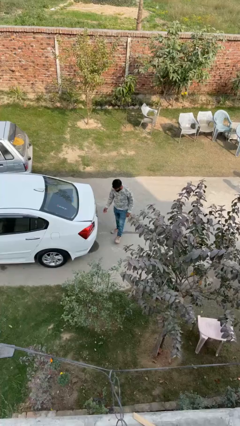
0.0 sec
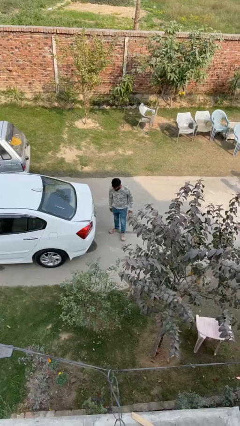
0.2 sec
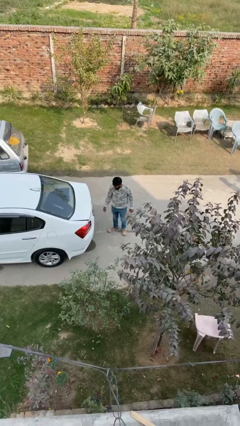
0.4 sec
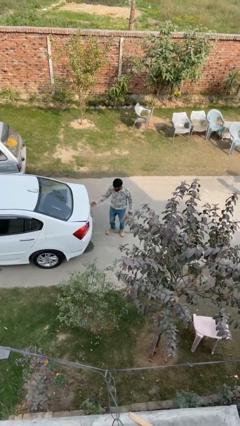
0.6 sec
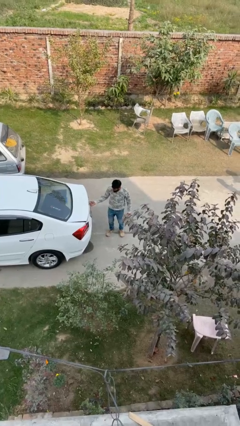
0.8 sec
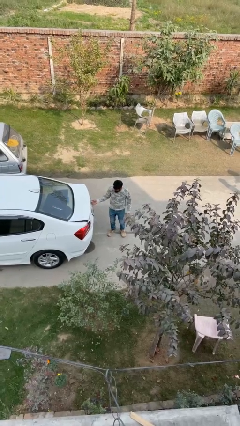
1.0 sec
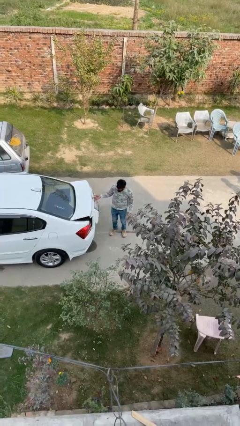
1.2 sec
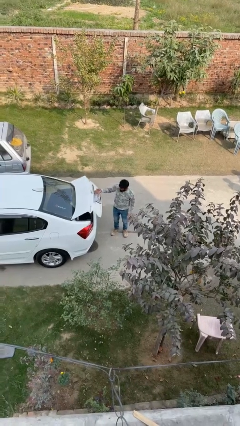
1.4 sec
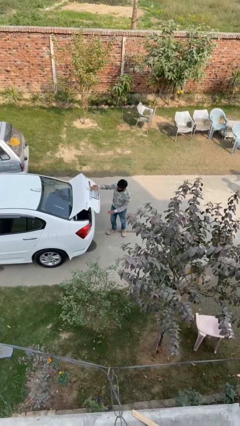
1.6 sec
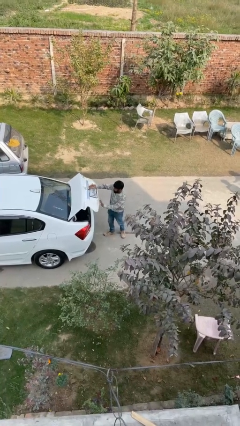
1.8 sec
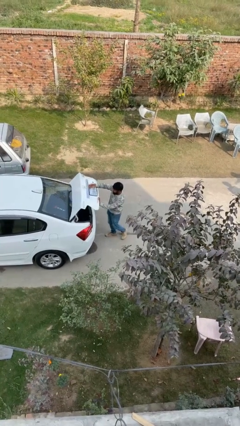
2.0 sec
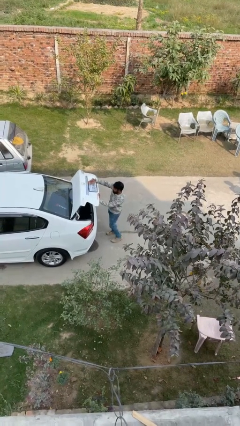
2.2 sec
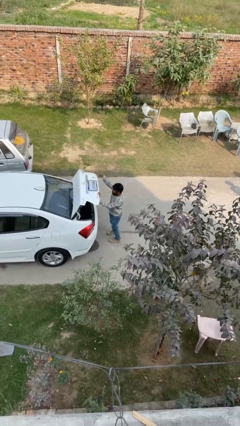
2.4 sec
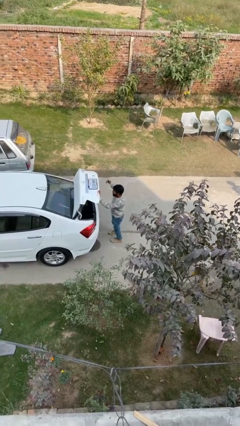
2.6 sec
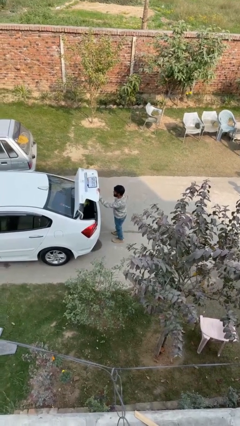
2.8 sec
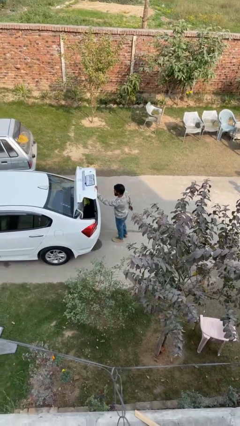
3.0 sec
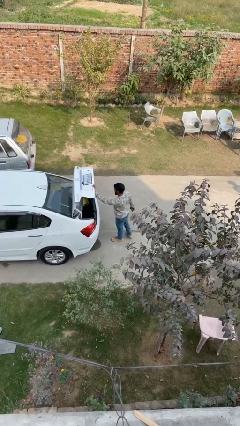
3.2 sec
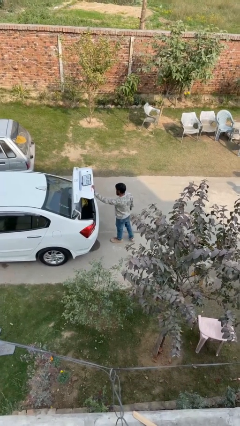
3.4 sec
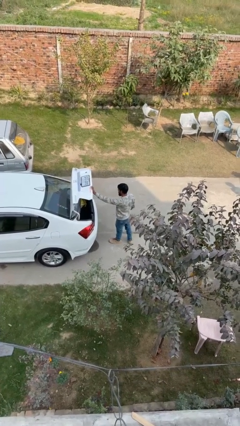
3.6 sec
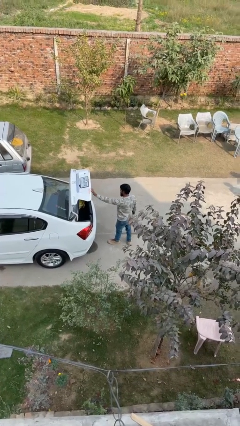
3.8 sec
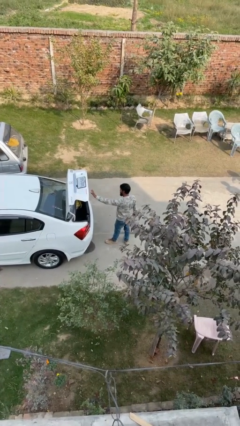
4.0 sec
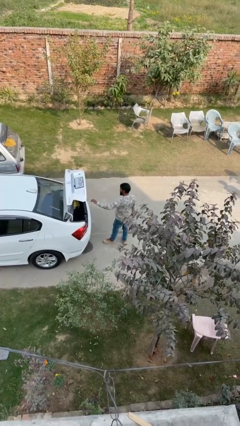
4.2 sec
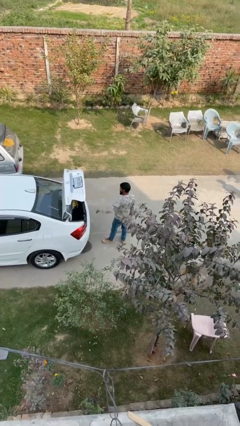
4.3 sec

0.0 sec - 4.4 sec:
person opens car trunk

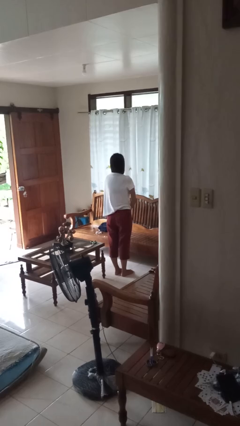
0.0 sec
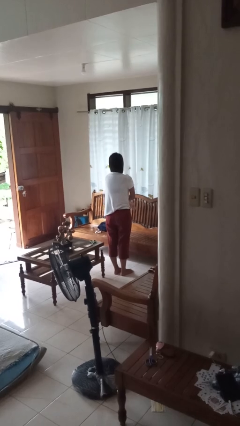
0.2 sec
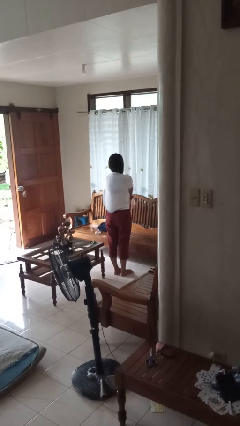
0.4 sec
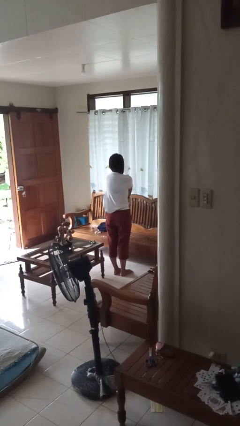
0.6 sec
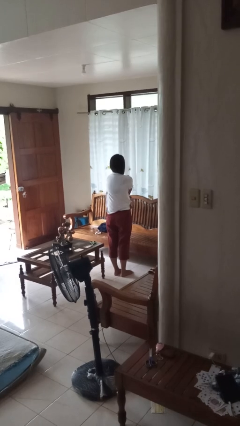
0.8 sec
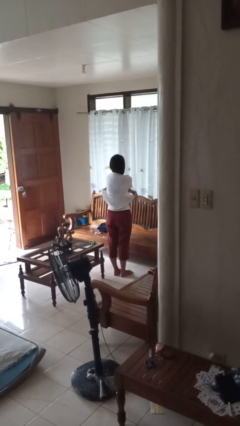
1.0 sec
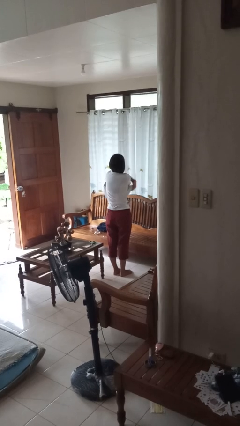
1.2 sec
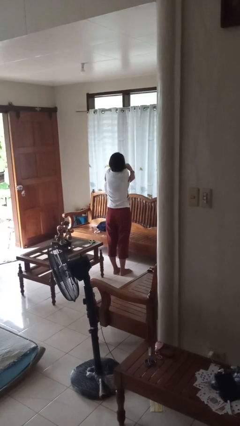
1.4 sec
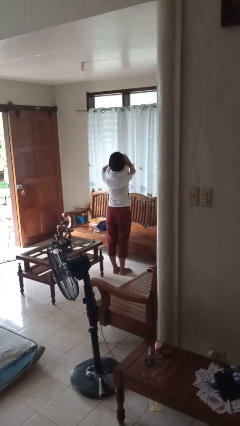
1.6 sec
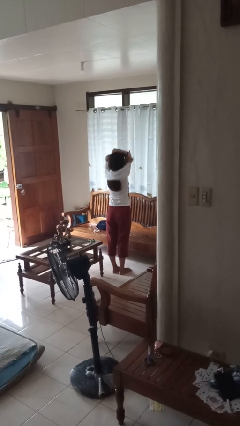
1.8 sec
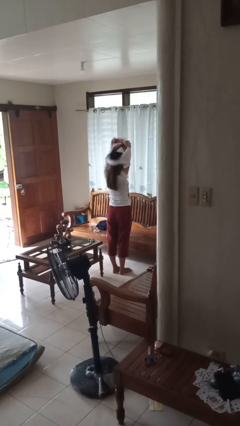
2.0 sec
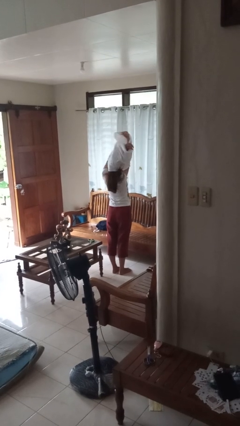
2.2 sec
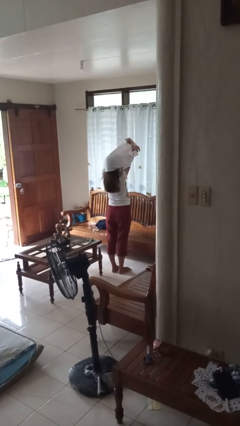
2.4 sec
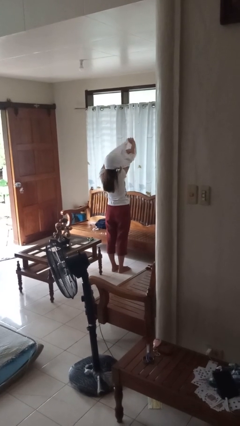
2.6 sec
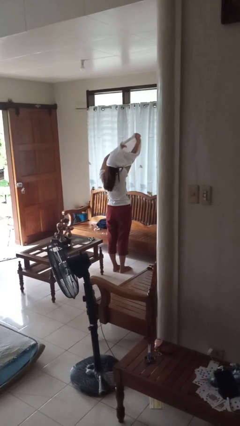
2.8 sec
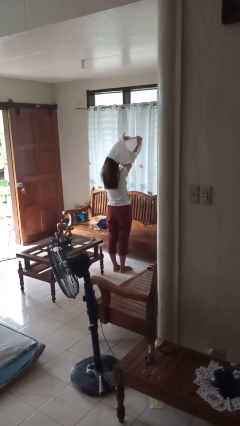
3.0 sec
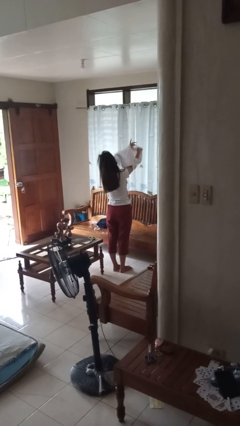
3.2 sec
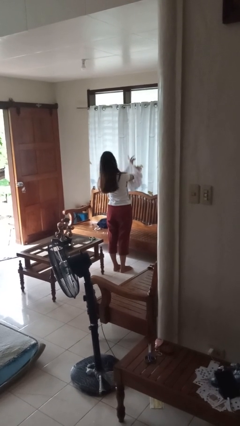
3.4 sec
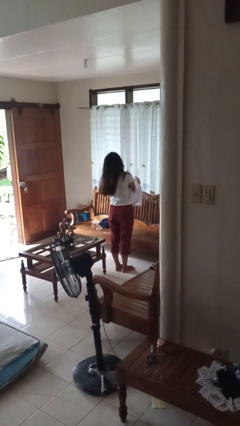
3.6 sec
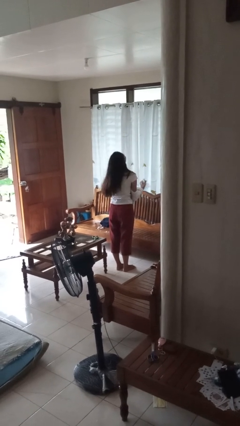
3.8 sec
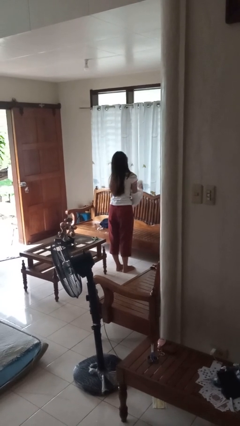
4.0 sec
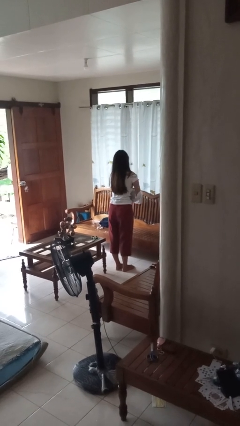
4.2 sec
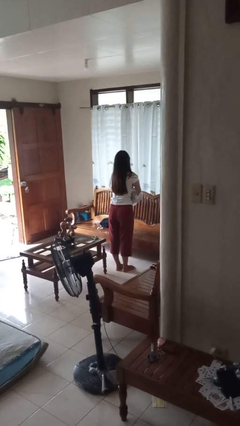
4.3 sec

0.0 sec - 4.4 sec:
person takes off shirt

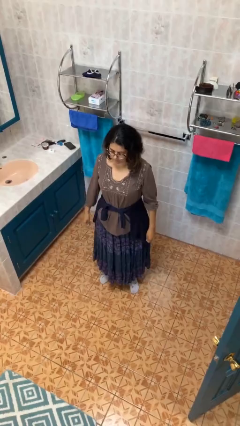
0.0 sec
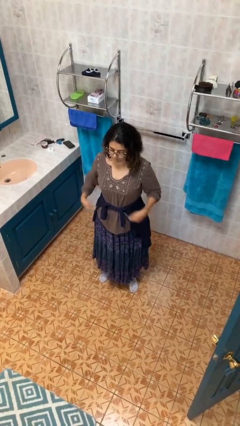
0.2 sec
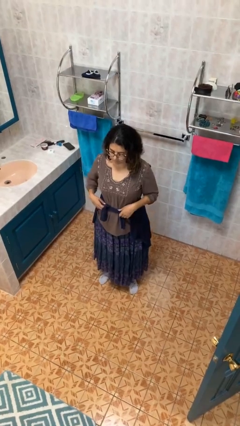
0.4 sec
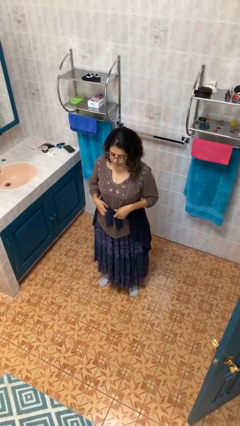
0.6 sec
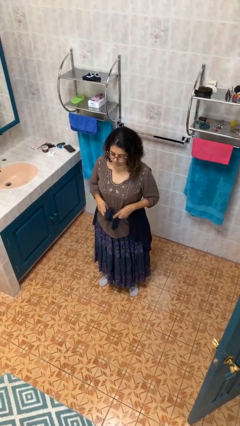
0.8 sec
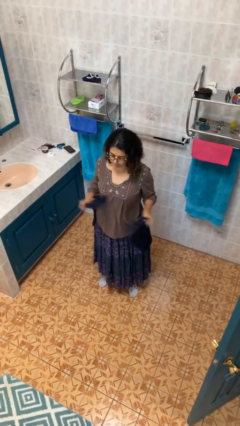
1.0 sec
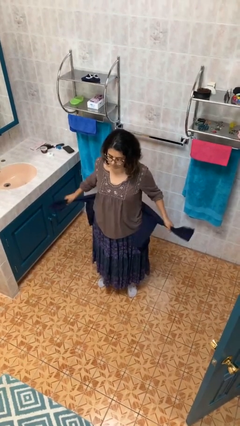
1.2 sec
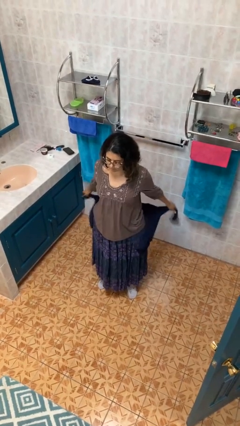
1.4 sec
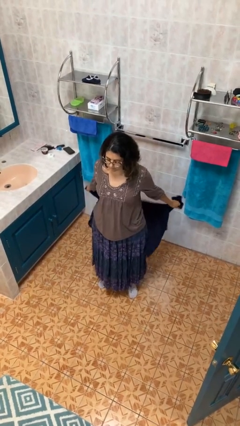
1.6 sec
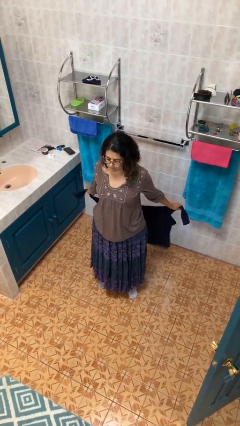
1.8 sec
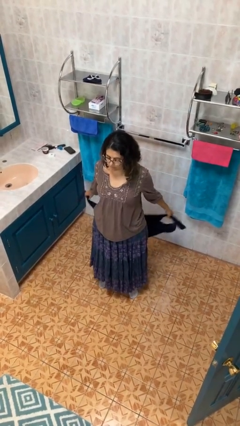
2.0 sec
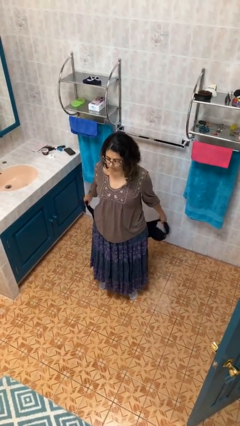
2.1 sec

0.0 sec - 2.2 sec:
person unties jacket around waist

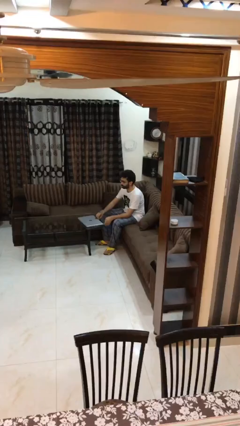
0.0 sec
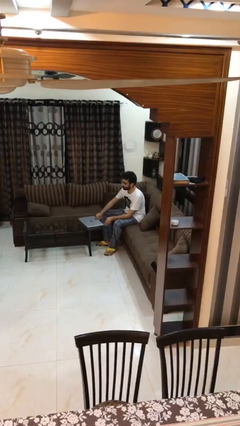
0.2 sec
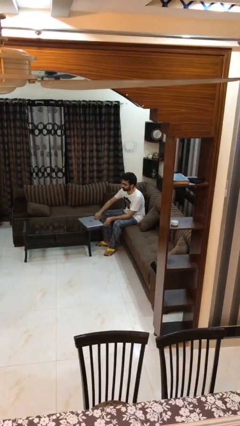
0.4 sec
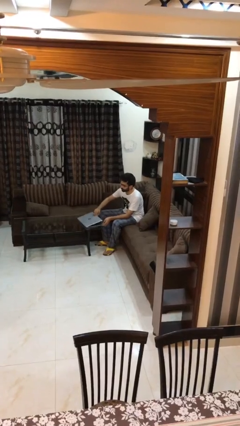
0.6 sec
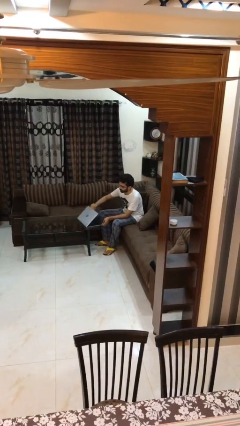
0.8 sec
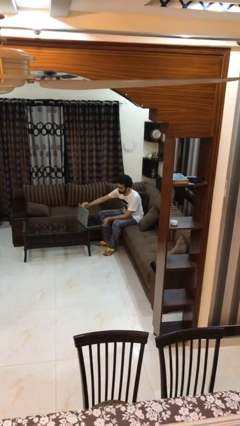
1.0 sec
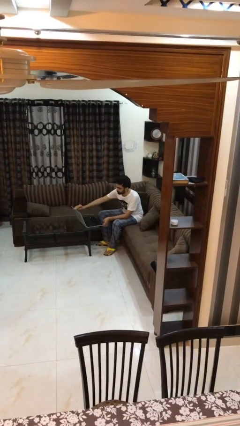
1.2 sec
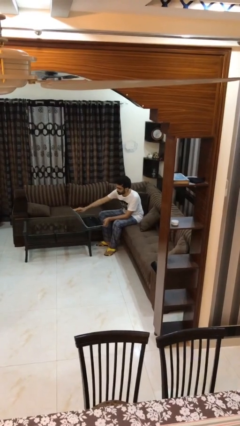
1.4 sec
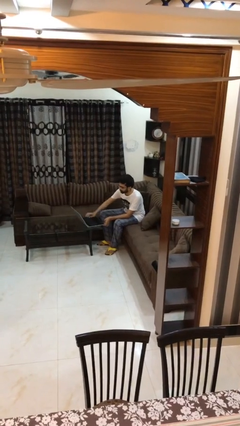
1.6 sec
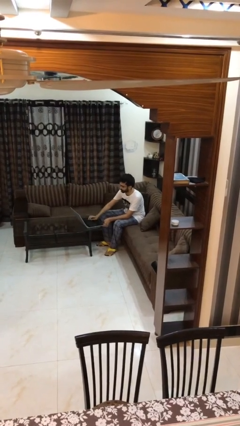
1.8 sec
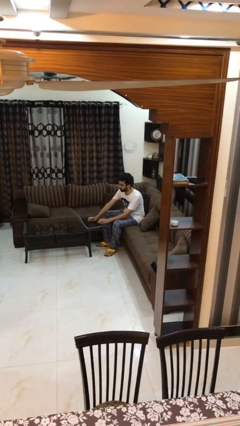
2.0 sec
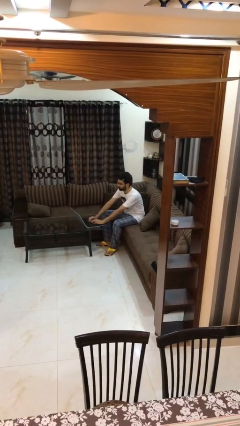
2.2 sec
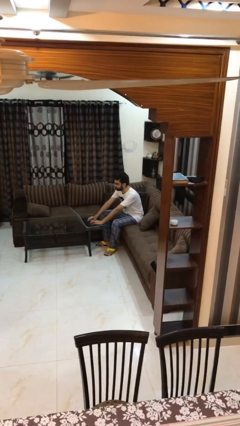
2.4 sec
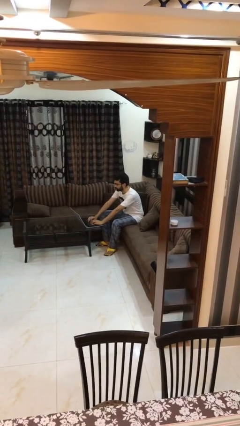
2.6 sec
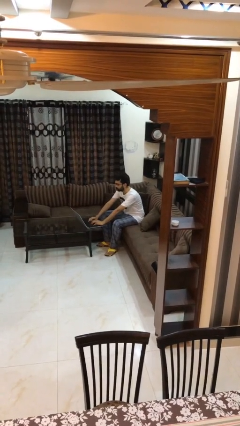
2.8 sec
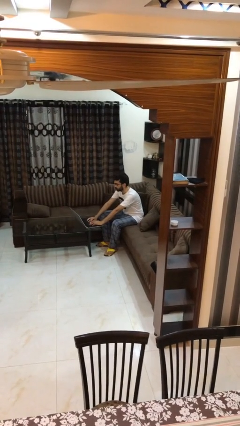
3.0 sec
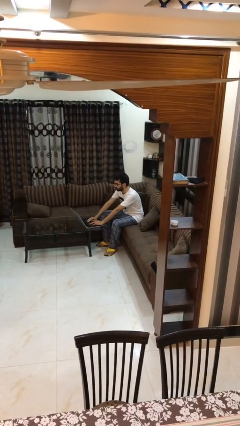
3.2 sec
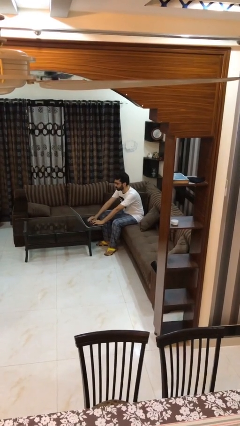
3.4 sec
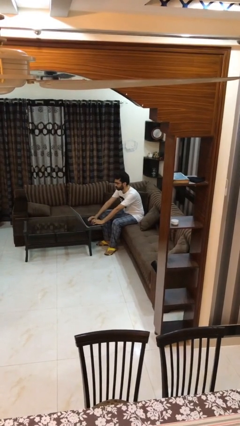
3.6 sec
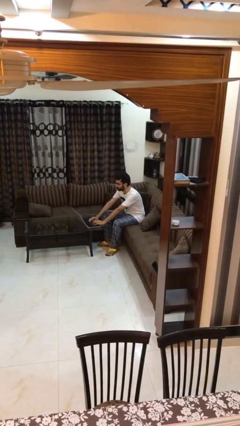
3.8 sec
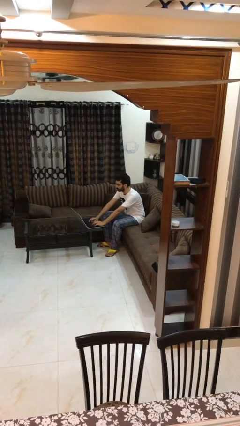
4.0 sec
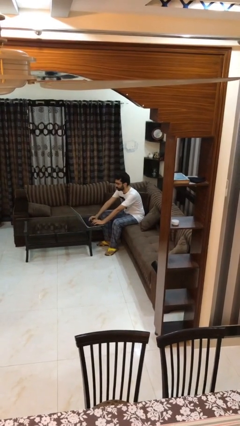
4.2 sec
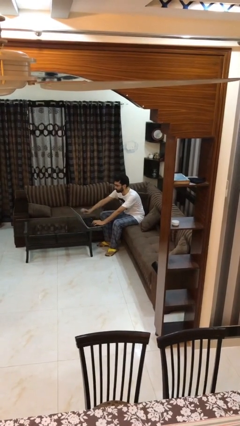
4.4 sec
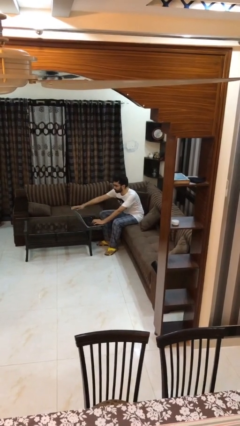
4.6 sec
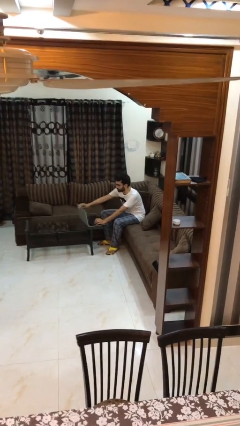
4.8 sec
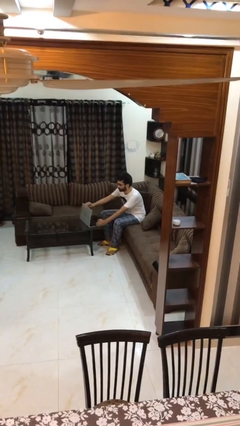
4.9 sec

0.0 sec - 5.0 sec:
person interacts with laptop

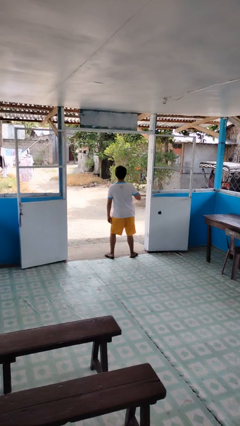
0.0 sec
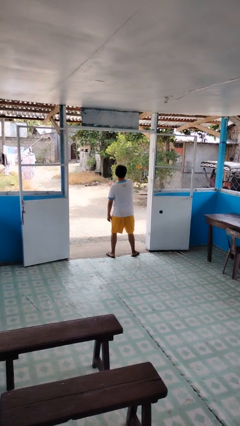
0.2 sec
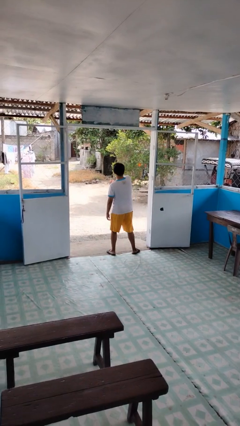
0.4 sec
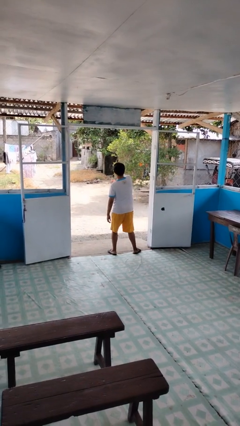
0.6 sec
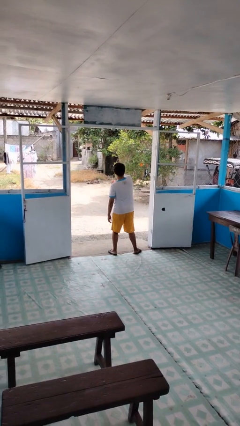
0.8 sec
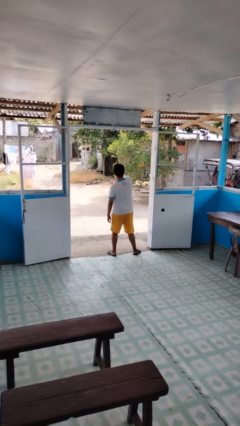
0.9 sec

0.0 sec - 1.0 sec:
person punches

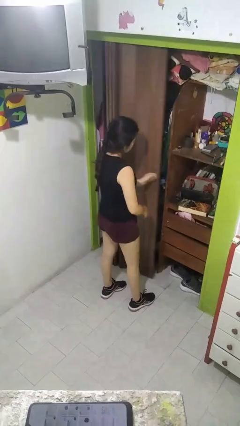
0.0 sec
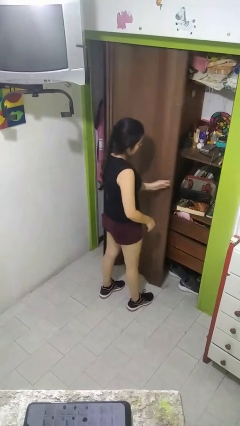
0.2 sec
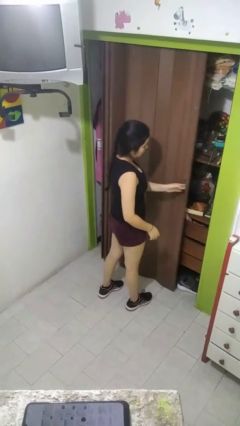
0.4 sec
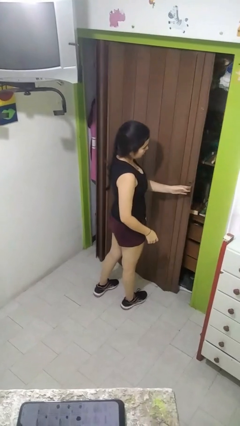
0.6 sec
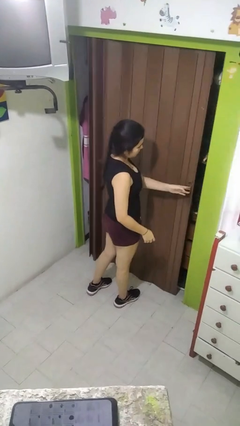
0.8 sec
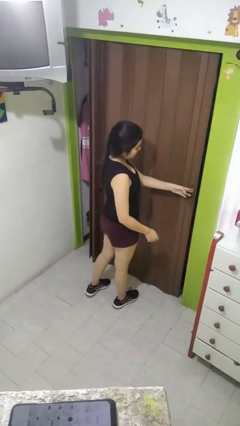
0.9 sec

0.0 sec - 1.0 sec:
person closes closet door
